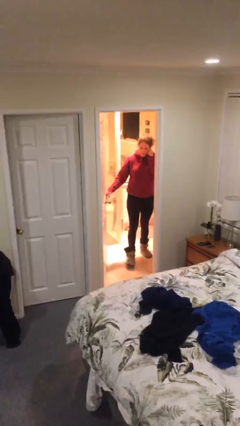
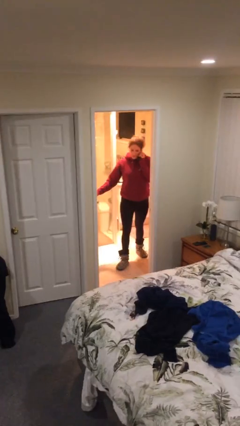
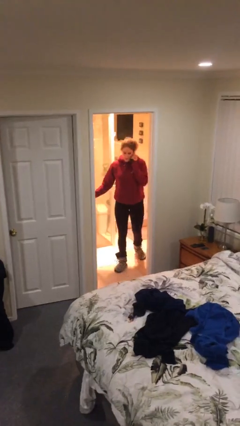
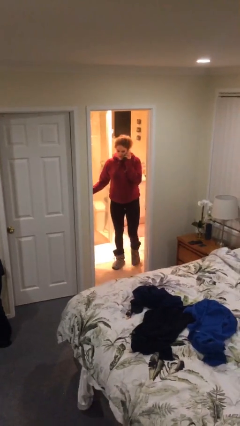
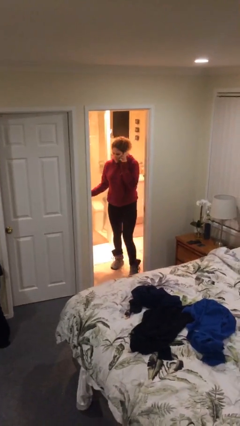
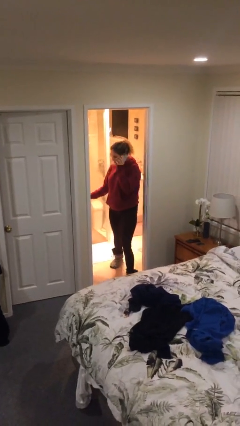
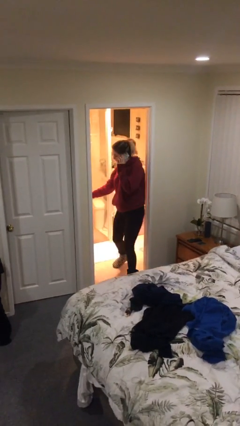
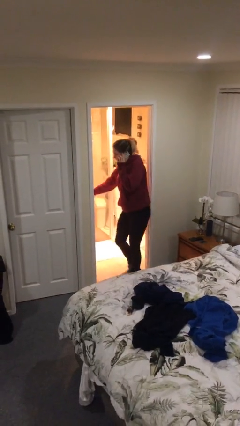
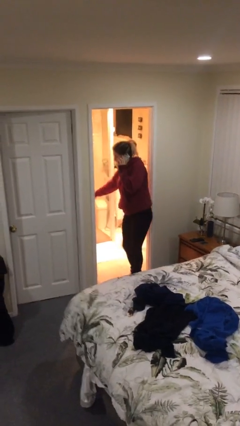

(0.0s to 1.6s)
person enters scene through structure

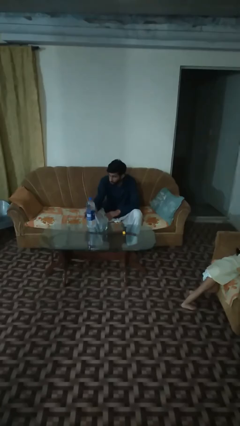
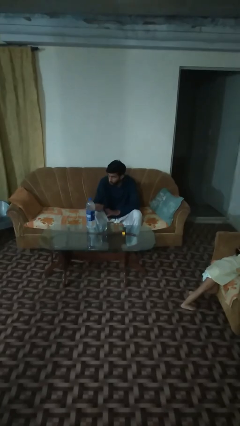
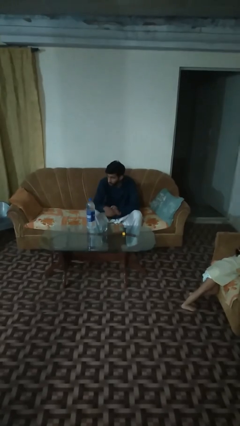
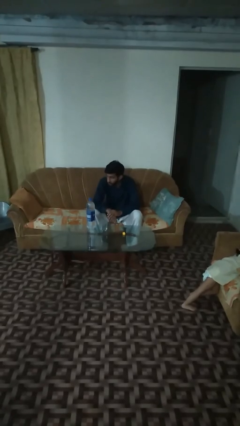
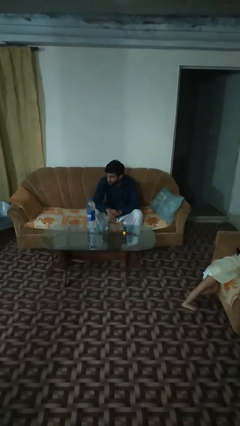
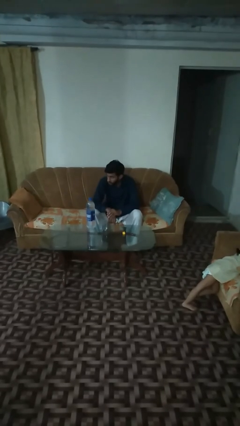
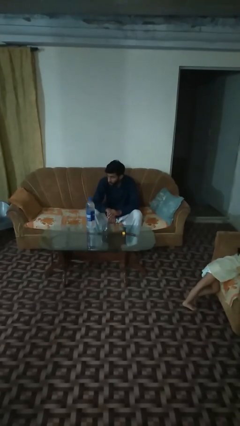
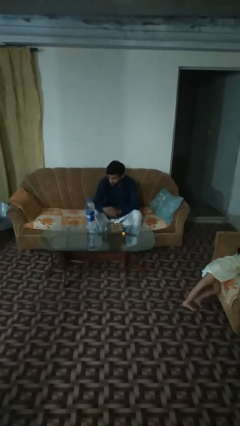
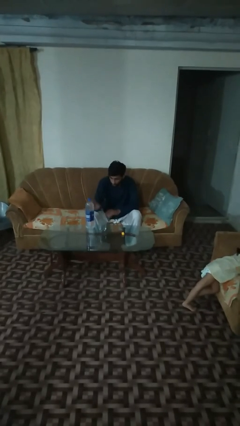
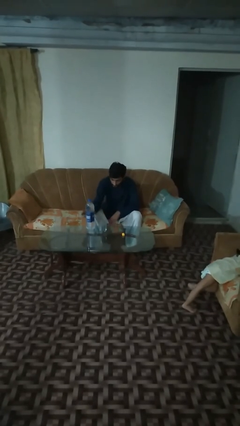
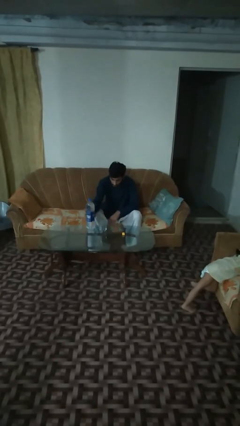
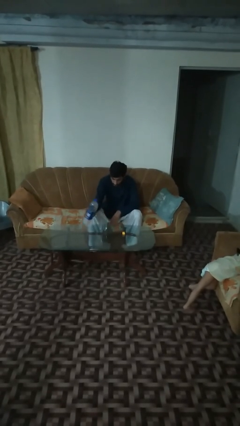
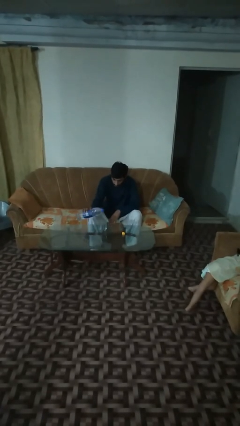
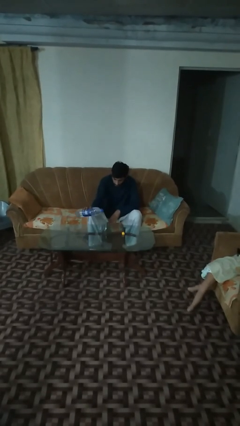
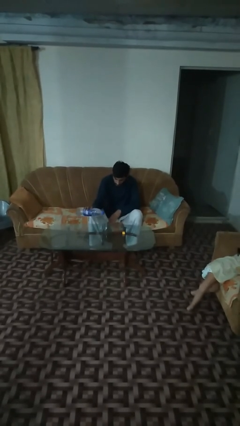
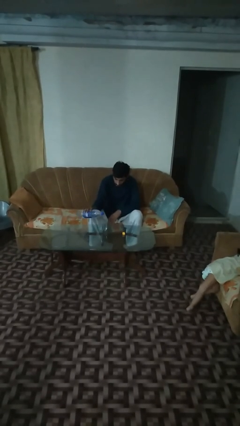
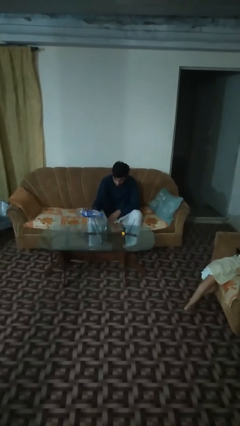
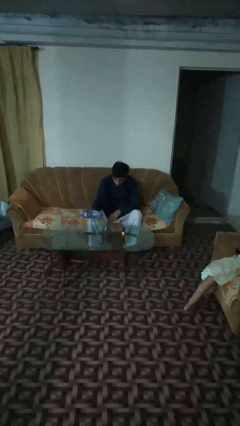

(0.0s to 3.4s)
person pours liquid into cup

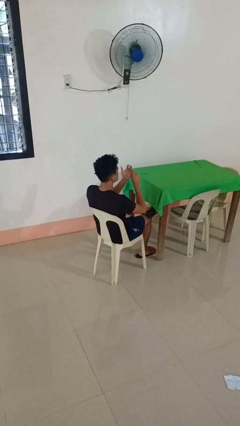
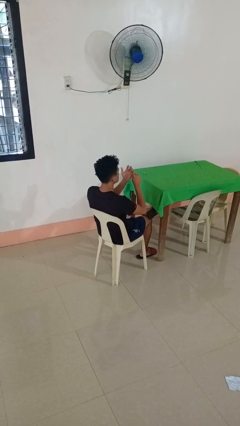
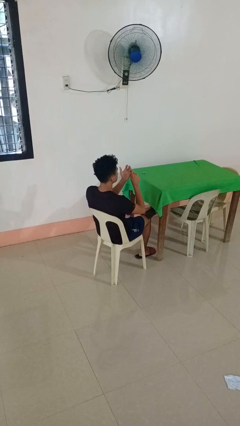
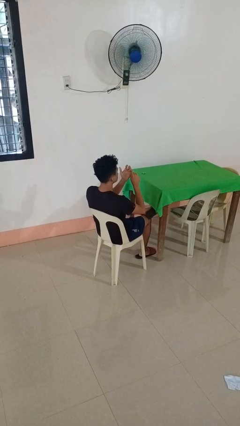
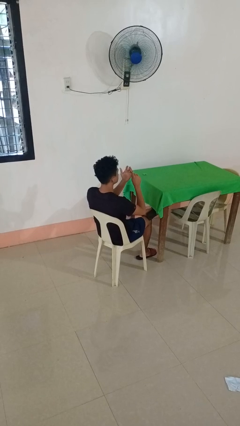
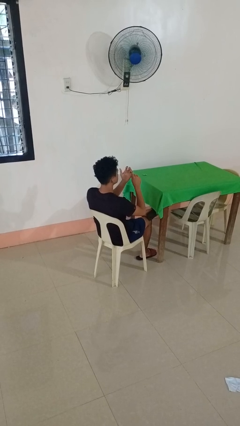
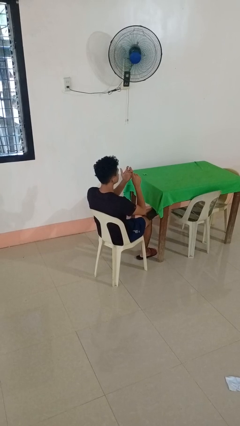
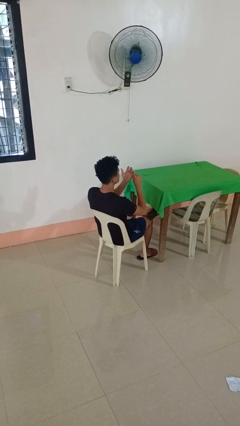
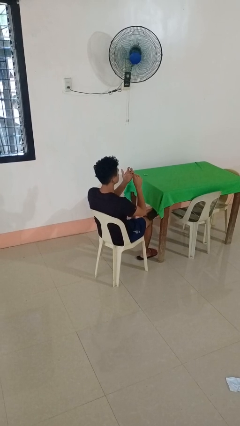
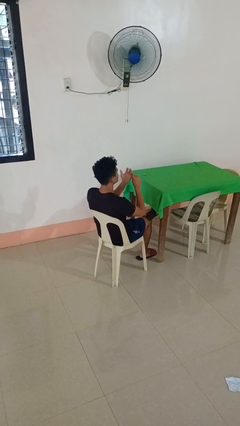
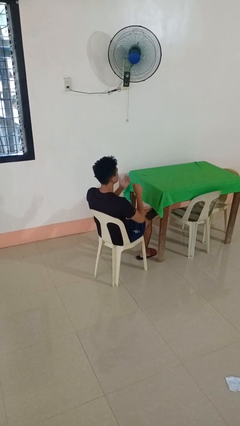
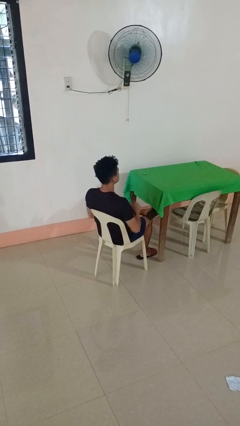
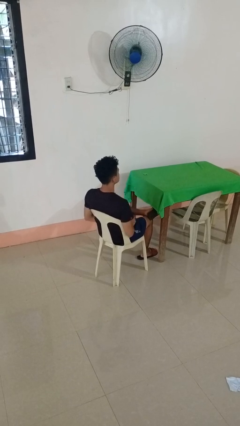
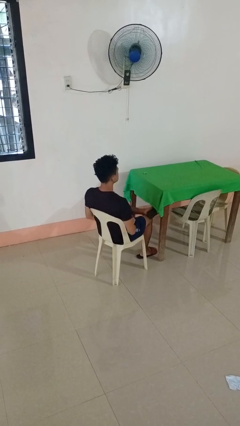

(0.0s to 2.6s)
person files fingernails

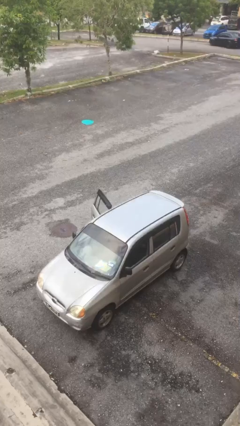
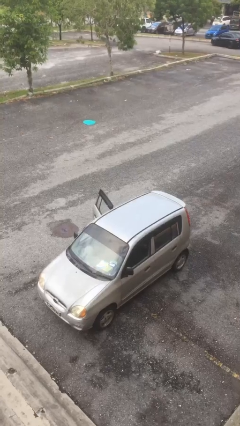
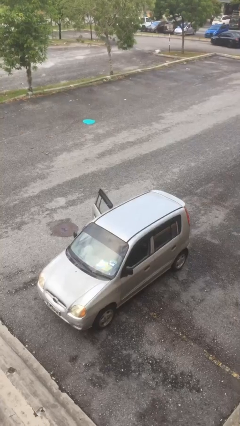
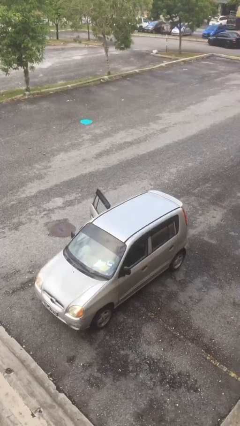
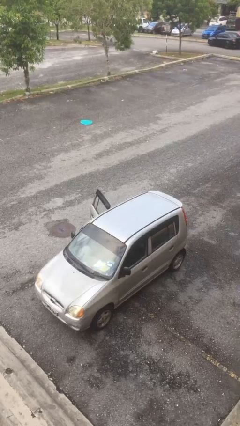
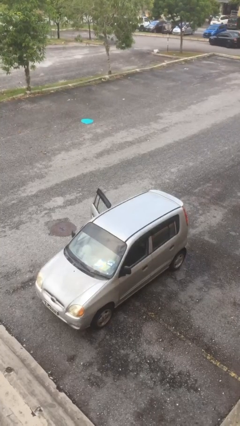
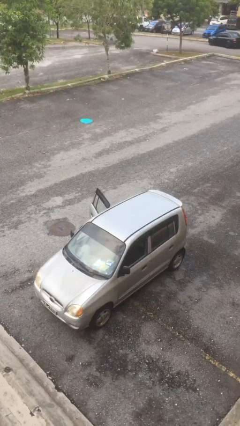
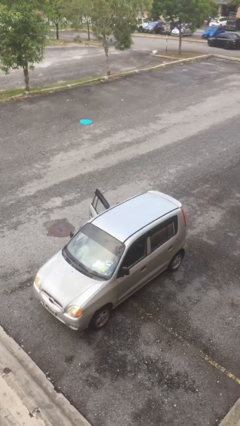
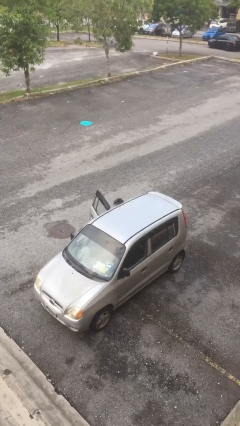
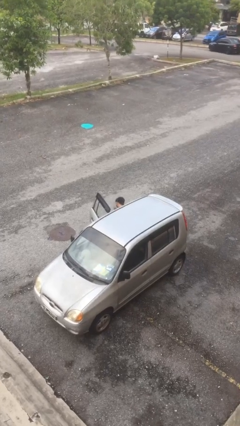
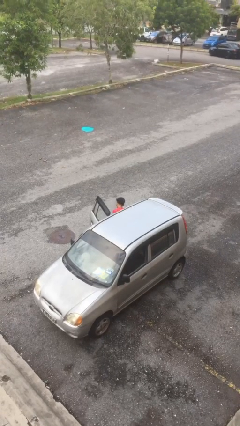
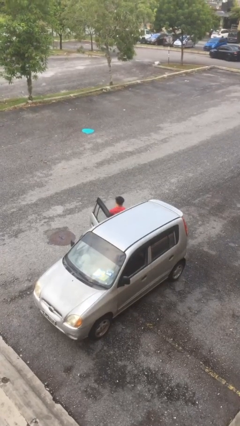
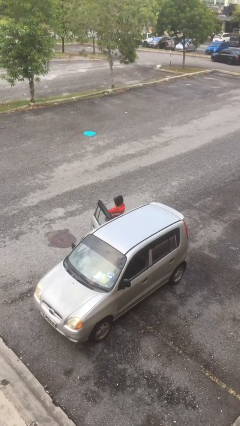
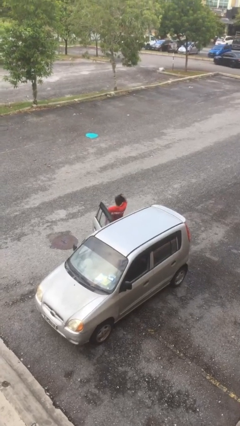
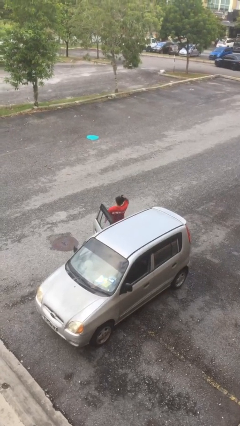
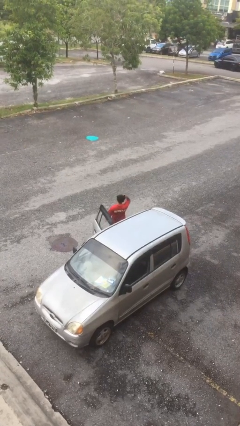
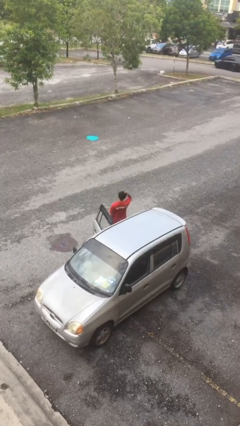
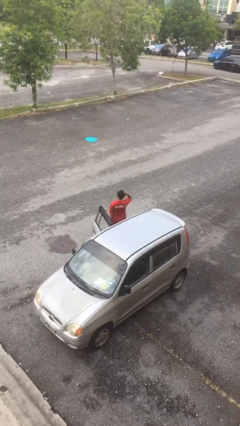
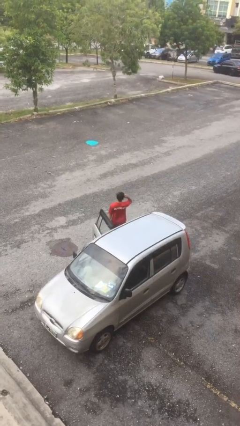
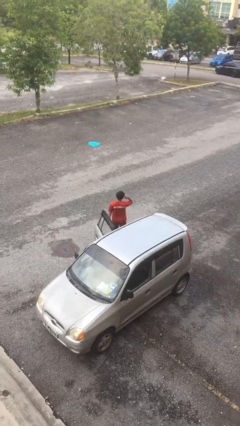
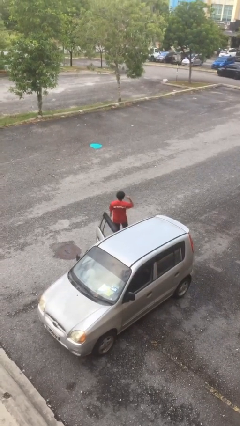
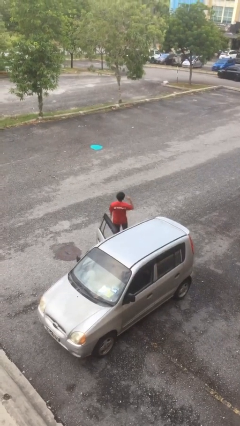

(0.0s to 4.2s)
person exits car

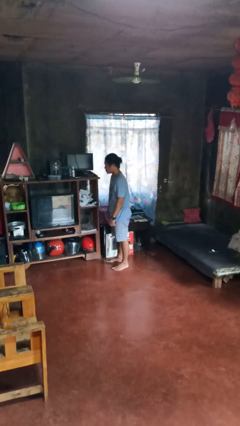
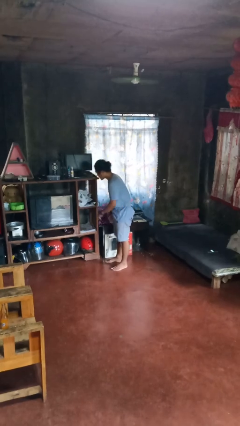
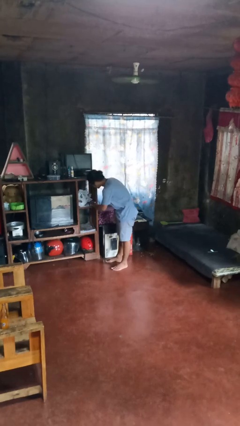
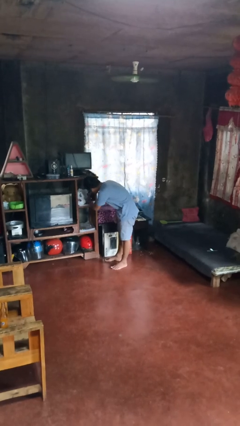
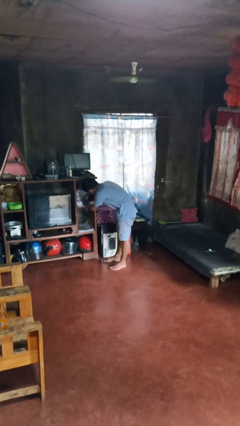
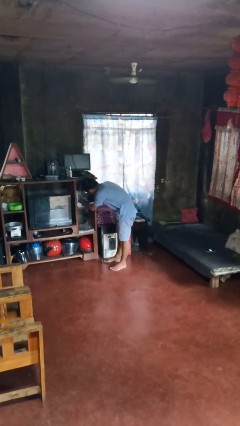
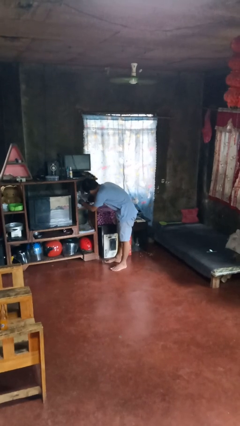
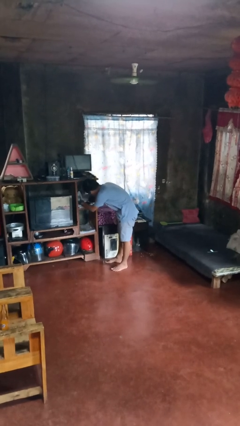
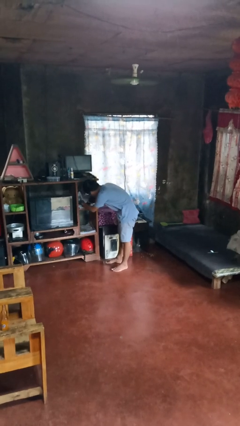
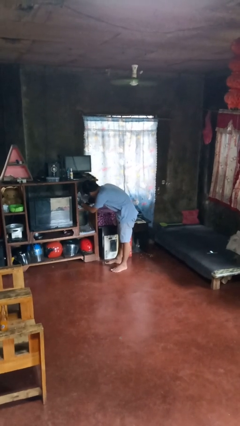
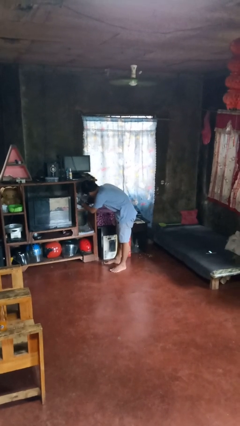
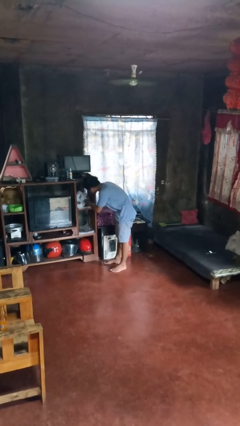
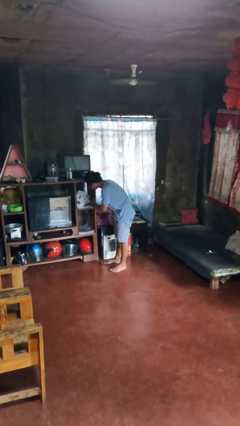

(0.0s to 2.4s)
person searches in cabinet

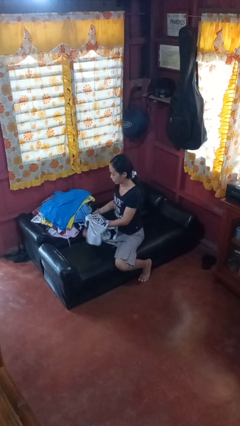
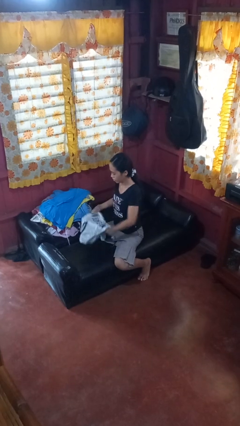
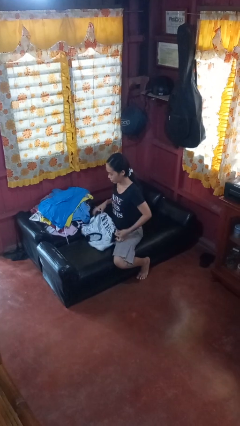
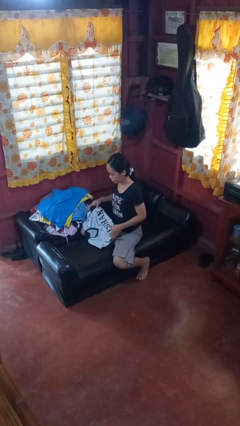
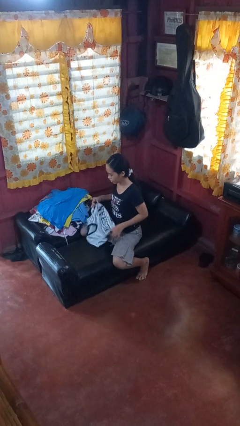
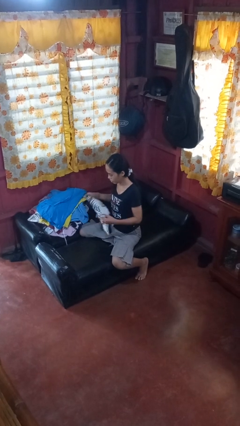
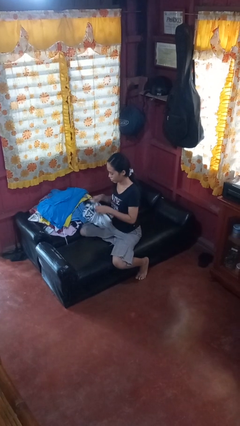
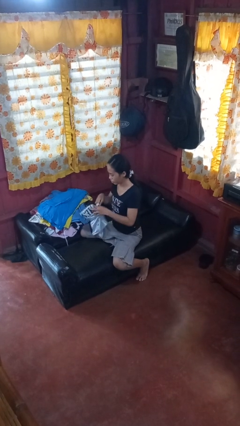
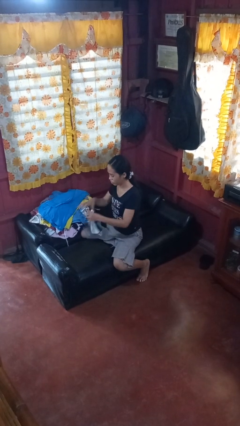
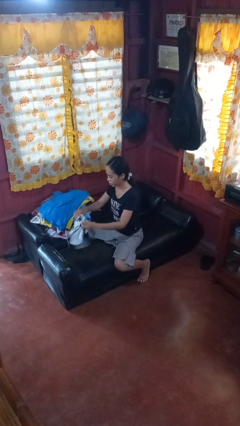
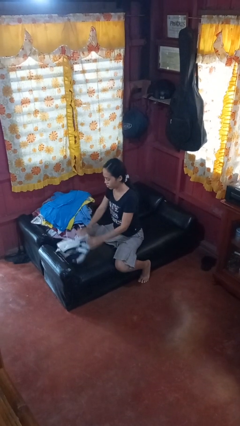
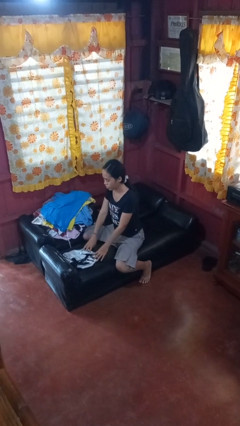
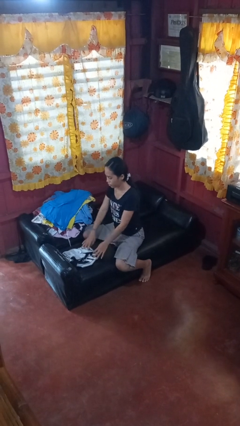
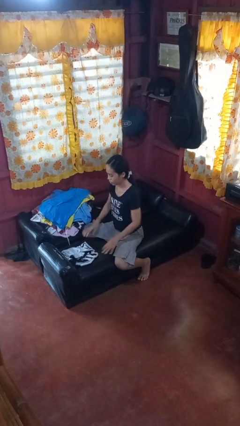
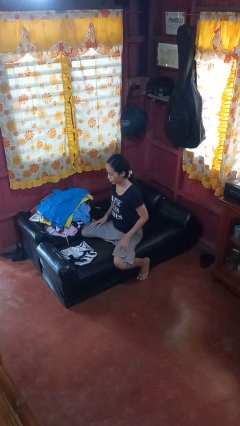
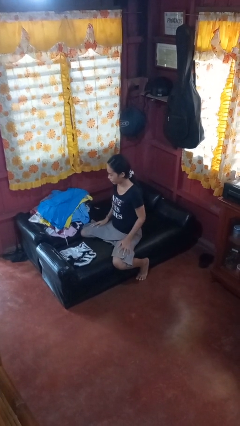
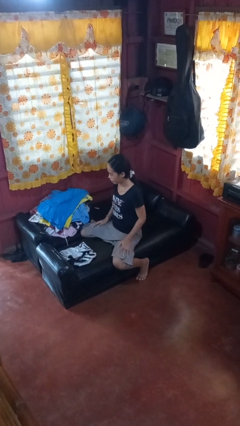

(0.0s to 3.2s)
person folds shirt
